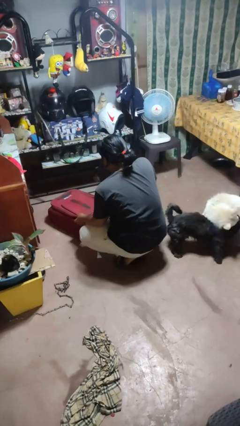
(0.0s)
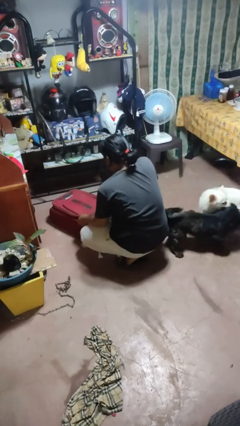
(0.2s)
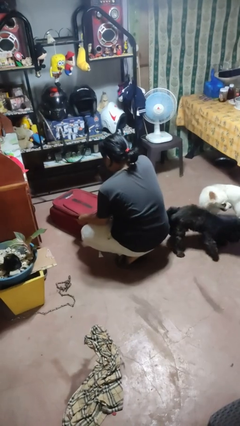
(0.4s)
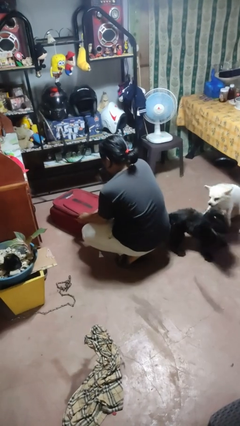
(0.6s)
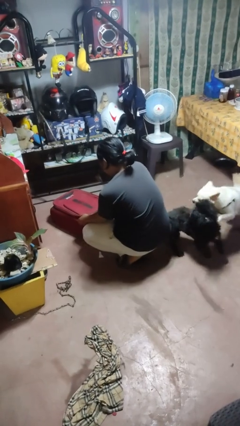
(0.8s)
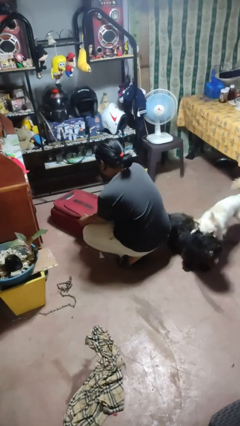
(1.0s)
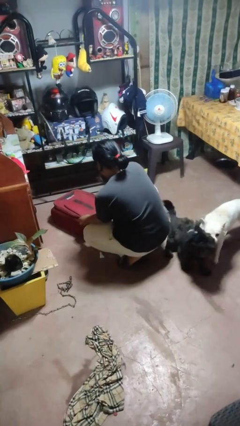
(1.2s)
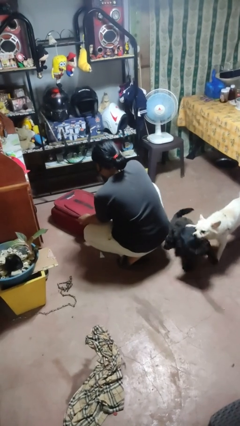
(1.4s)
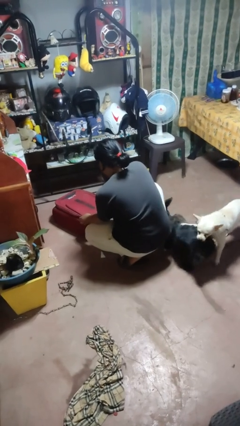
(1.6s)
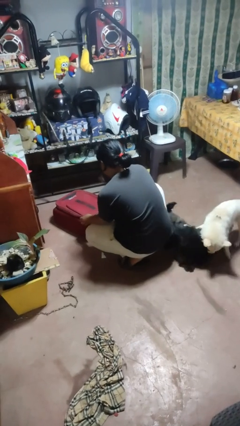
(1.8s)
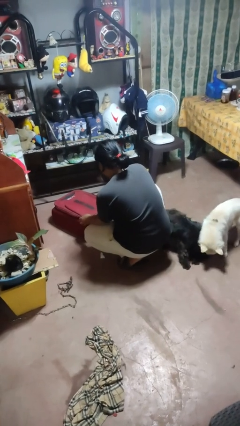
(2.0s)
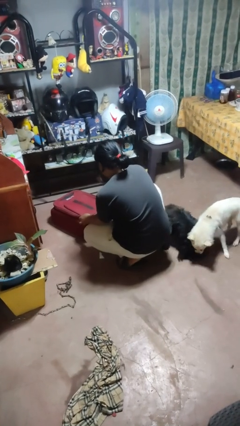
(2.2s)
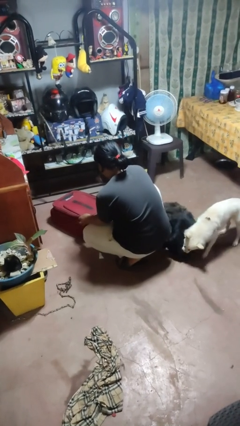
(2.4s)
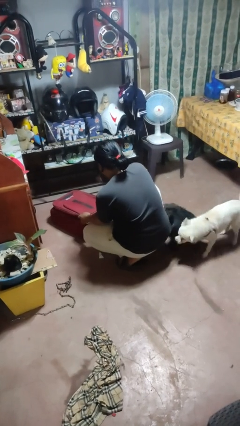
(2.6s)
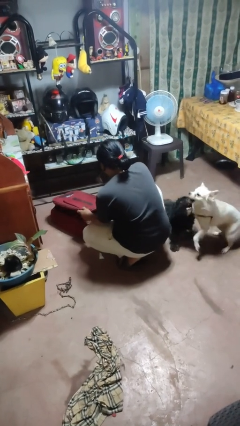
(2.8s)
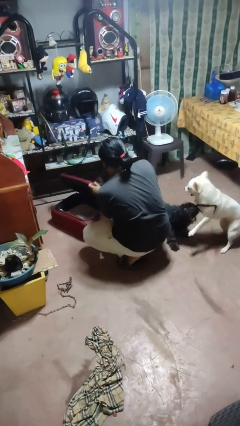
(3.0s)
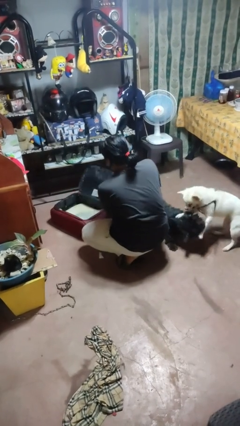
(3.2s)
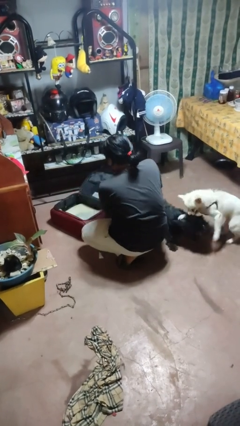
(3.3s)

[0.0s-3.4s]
person opens suitcase

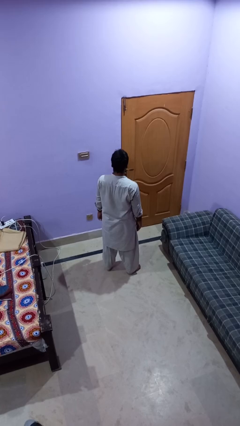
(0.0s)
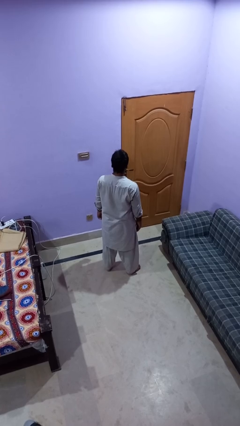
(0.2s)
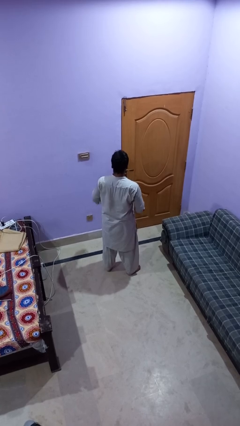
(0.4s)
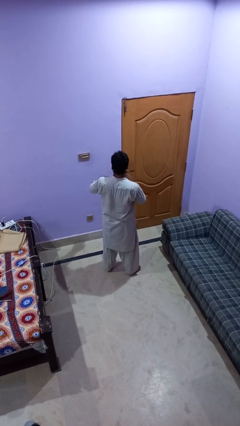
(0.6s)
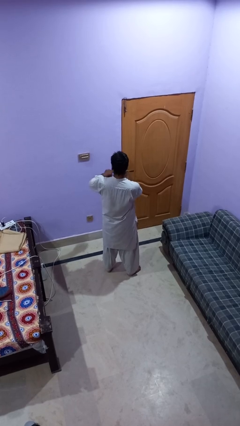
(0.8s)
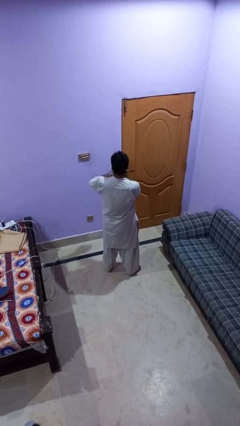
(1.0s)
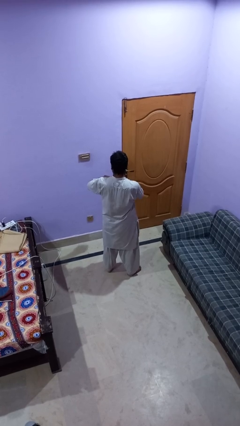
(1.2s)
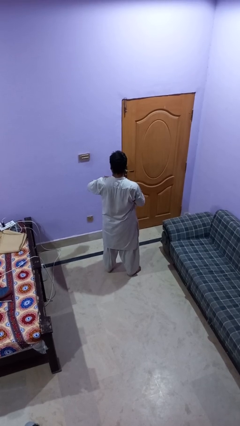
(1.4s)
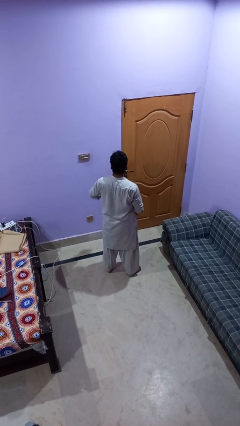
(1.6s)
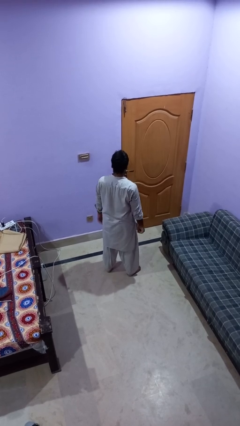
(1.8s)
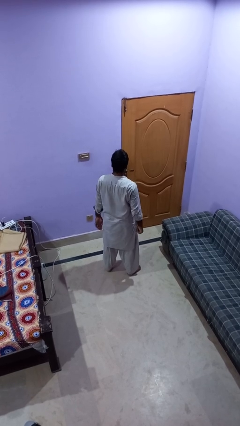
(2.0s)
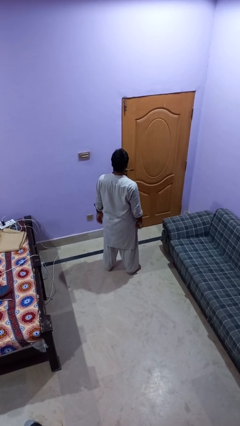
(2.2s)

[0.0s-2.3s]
person swats bug

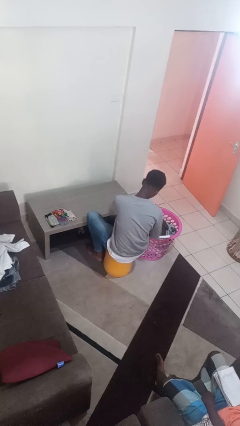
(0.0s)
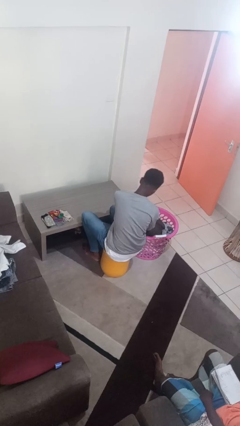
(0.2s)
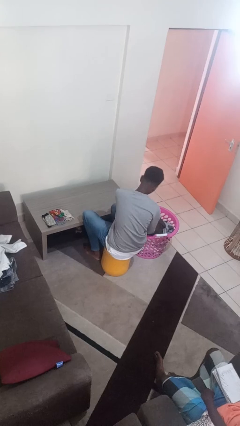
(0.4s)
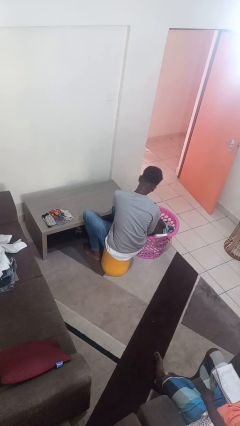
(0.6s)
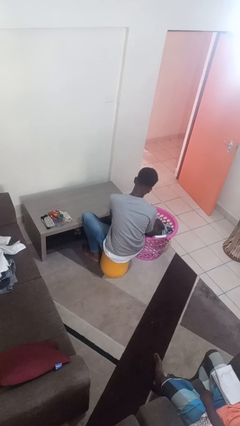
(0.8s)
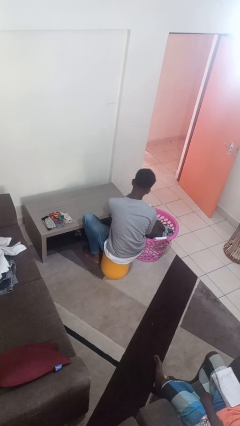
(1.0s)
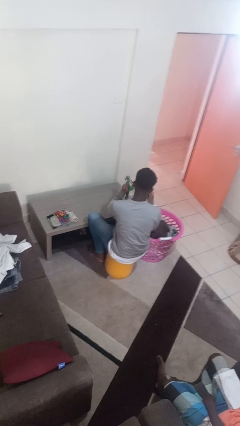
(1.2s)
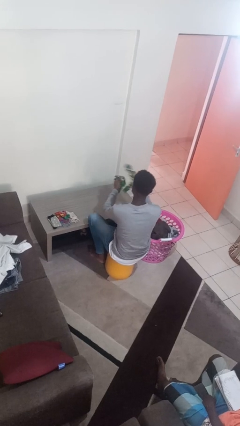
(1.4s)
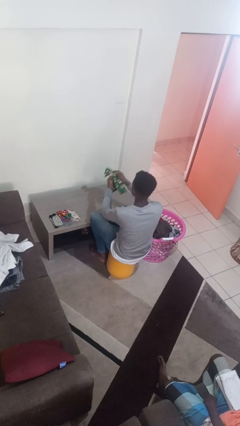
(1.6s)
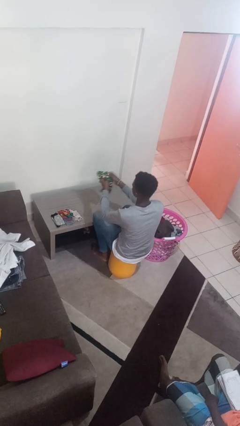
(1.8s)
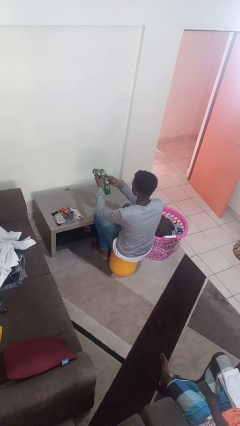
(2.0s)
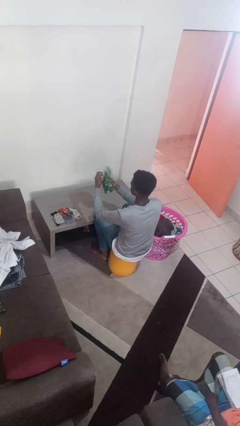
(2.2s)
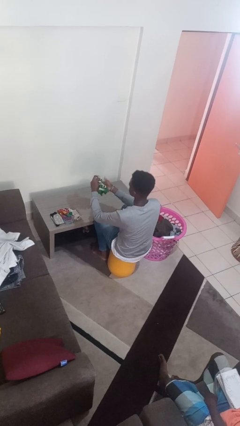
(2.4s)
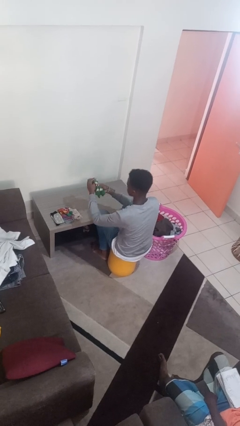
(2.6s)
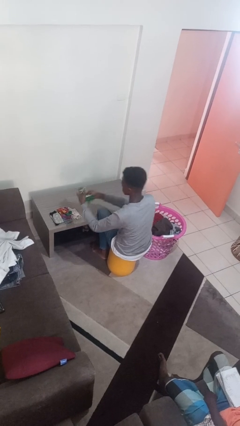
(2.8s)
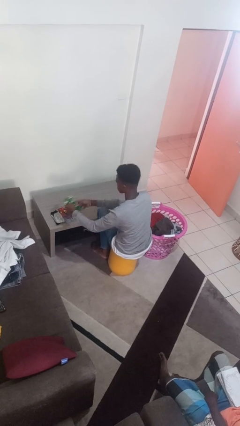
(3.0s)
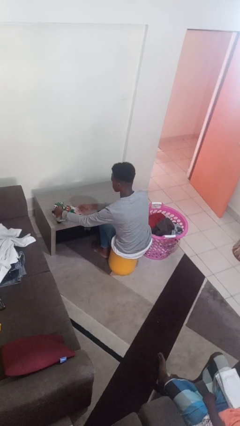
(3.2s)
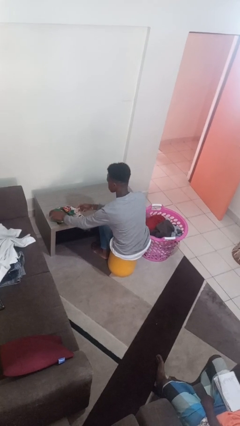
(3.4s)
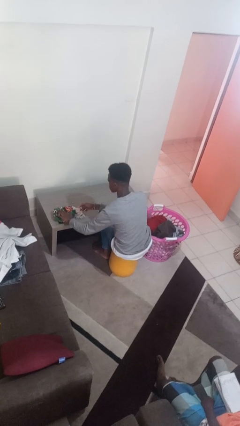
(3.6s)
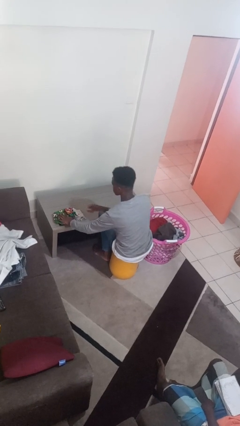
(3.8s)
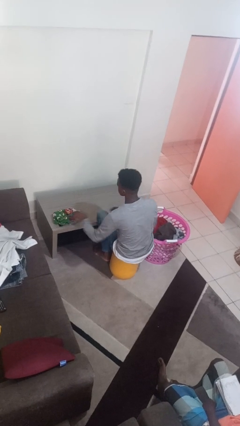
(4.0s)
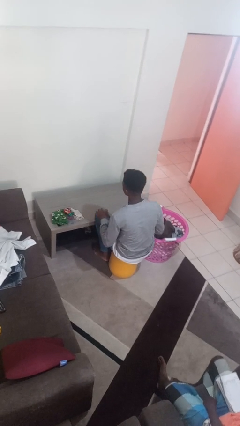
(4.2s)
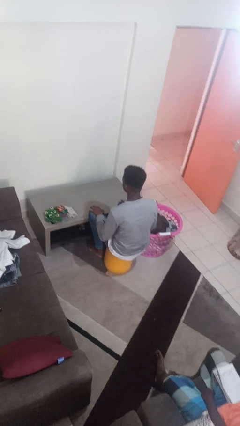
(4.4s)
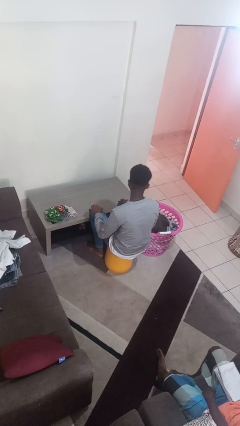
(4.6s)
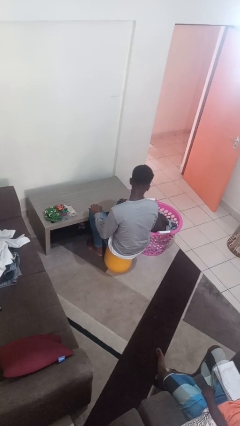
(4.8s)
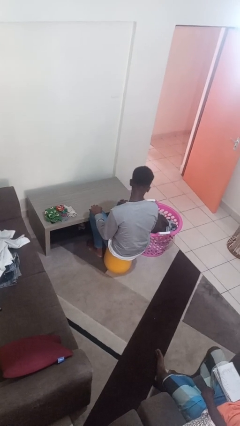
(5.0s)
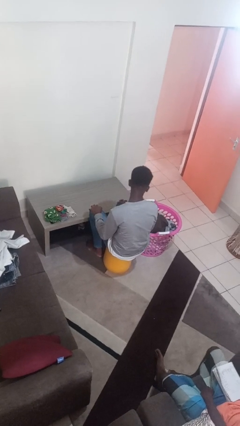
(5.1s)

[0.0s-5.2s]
person folds socks

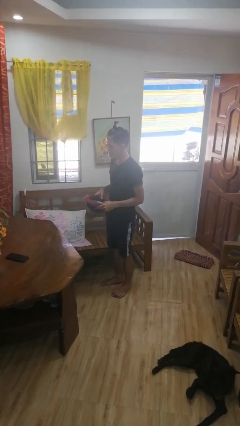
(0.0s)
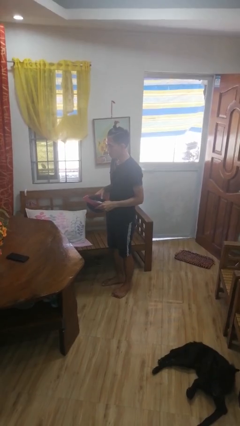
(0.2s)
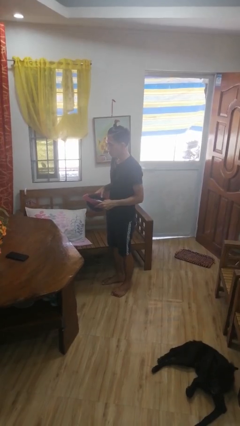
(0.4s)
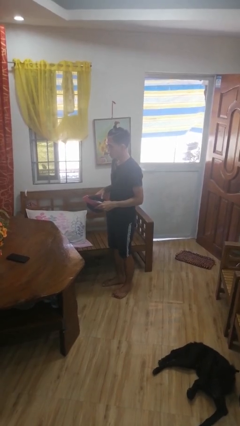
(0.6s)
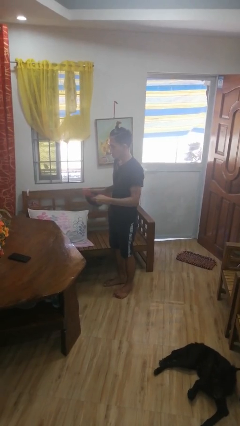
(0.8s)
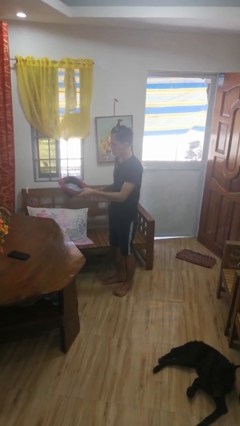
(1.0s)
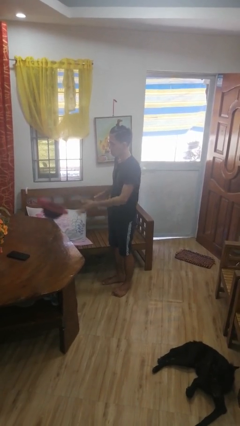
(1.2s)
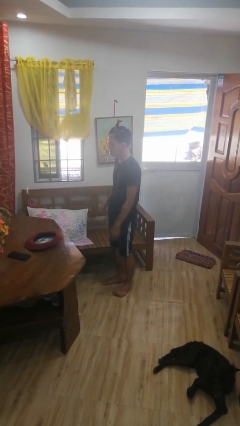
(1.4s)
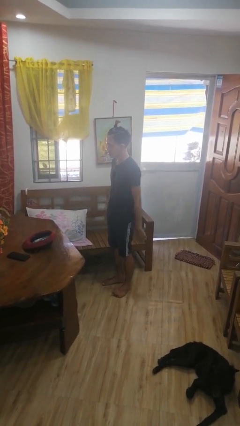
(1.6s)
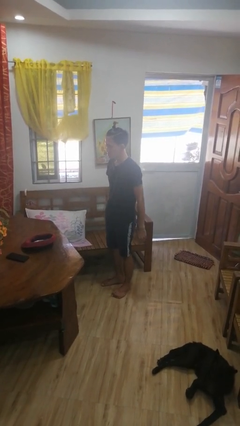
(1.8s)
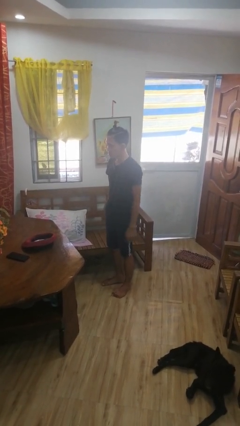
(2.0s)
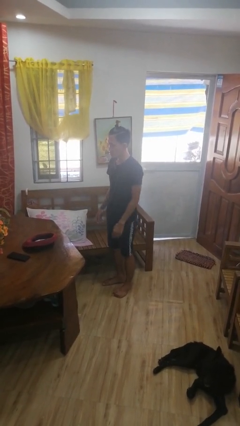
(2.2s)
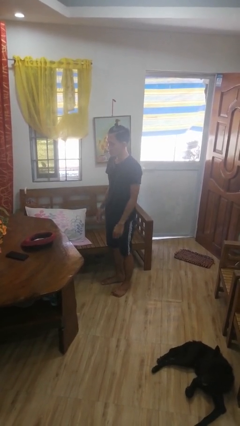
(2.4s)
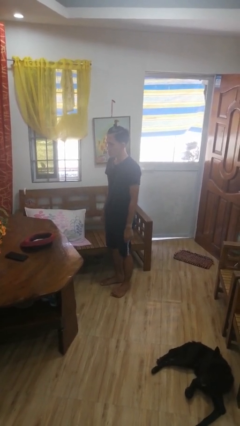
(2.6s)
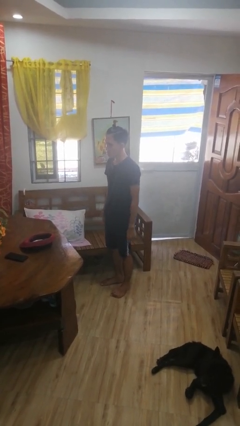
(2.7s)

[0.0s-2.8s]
person throws object on table

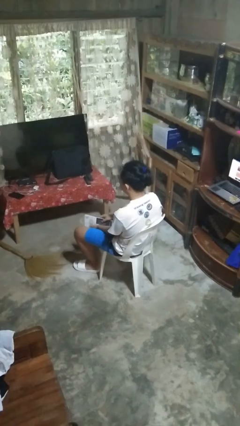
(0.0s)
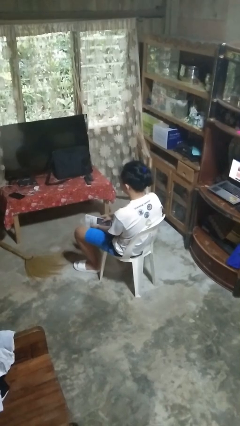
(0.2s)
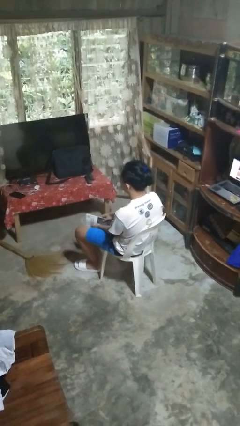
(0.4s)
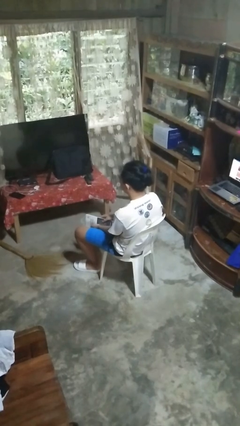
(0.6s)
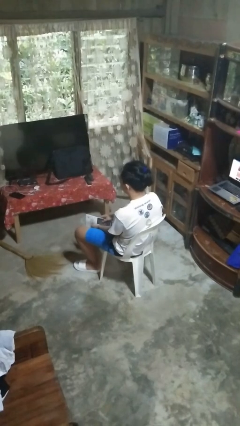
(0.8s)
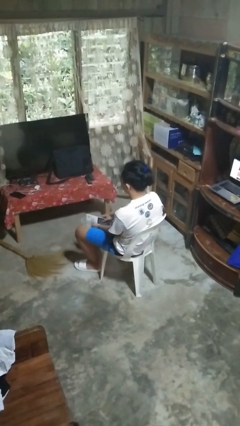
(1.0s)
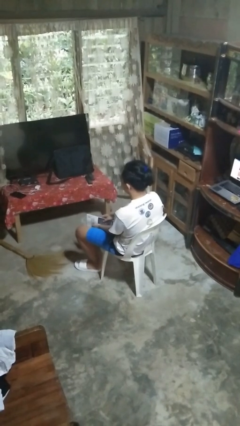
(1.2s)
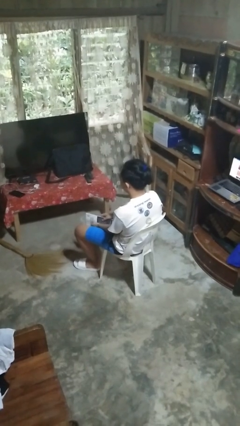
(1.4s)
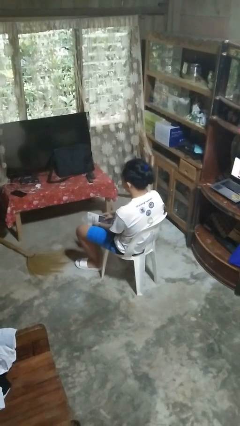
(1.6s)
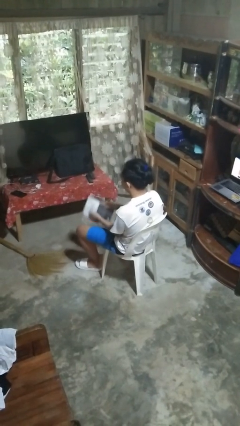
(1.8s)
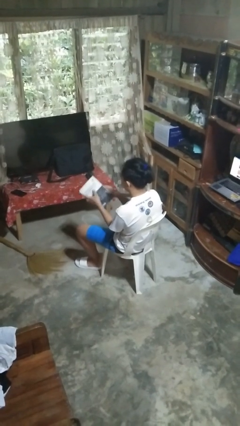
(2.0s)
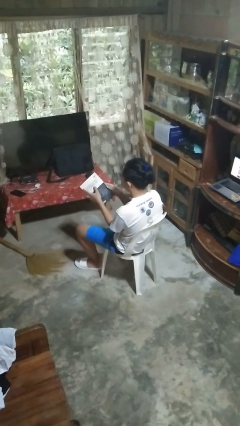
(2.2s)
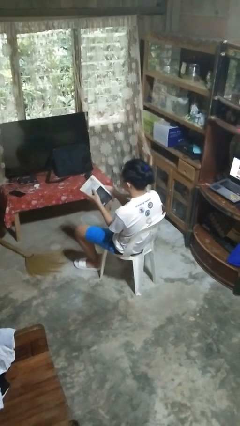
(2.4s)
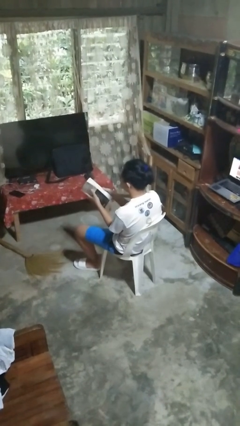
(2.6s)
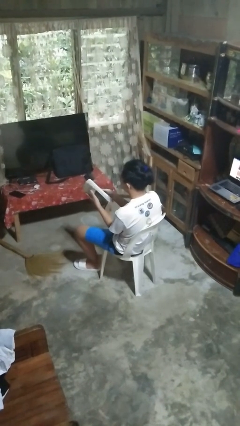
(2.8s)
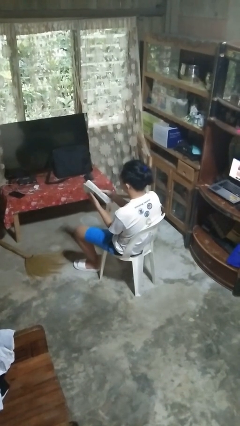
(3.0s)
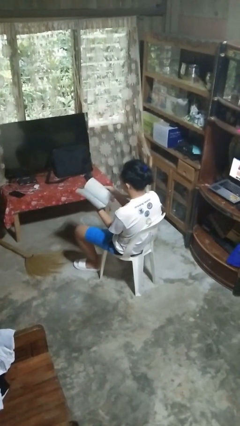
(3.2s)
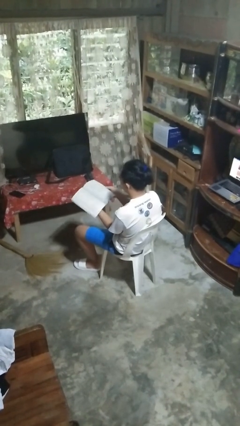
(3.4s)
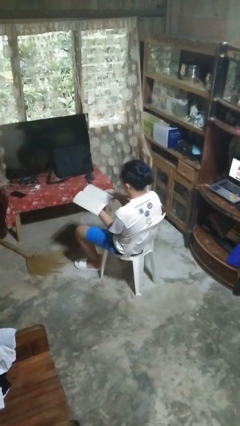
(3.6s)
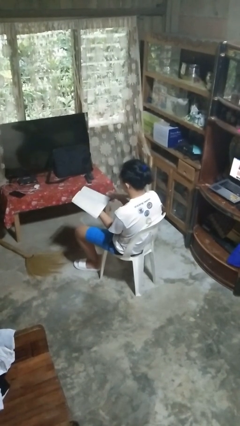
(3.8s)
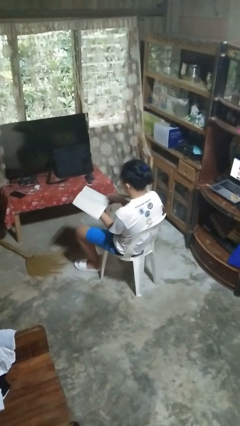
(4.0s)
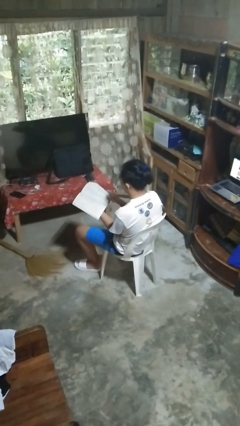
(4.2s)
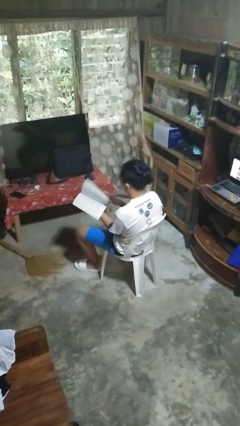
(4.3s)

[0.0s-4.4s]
person reads book
